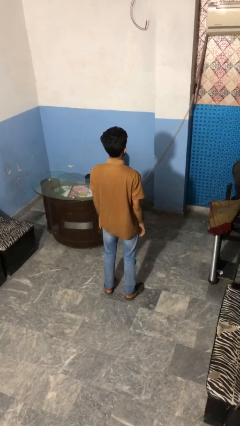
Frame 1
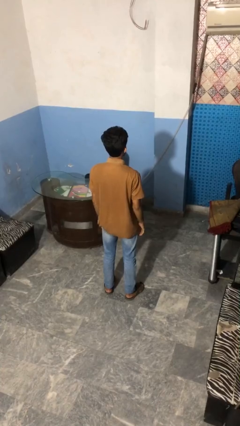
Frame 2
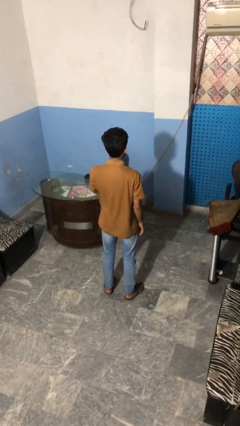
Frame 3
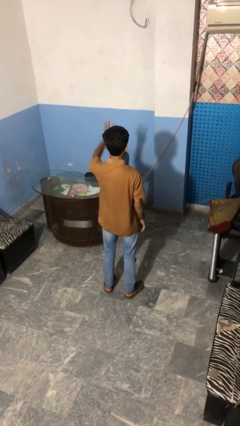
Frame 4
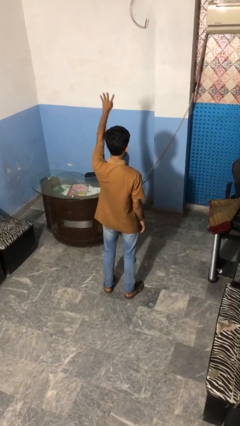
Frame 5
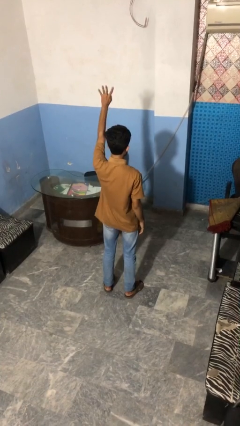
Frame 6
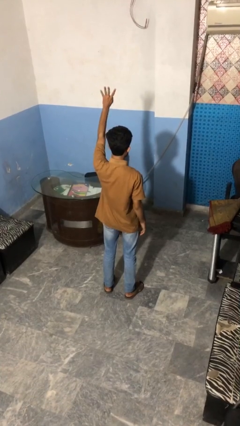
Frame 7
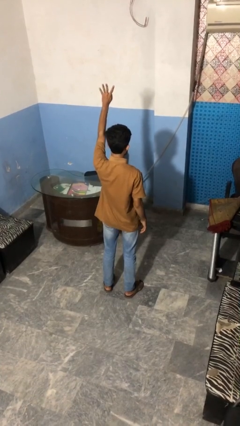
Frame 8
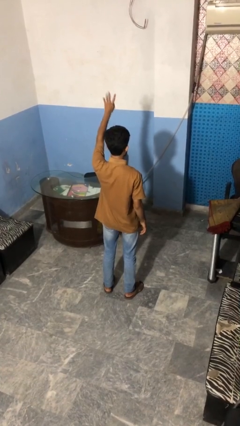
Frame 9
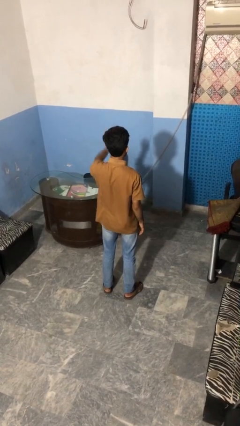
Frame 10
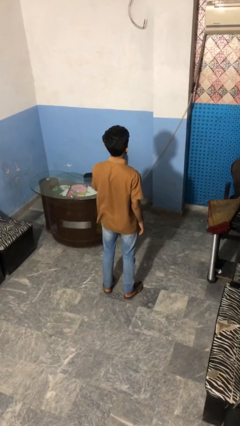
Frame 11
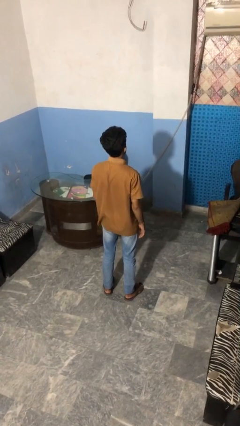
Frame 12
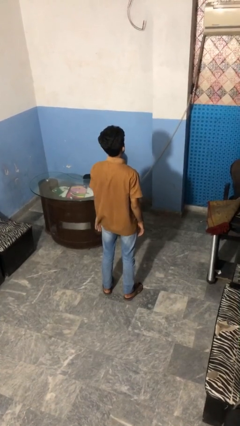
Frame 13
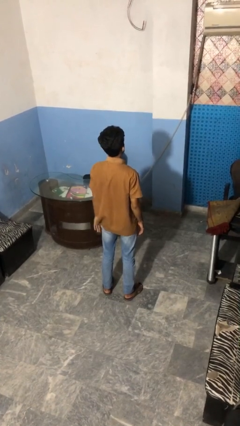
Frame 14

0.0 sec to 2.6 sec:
person gestures number four

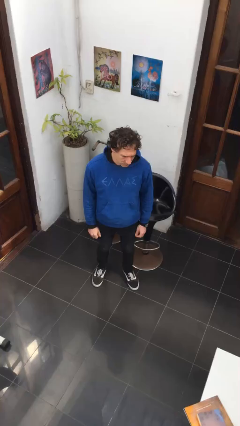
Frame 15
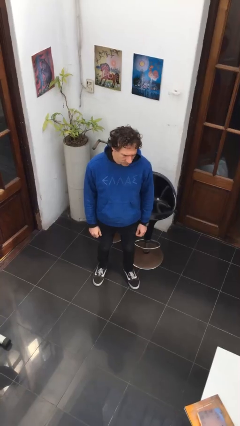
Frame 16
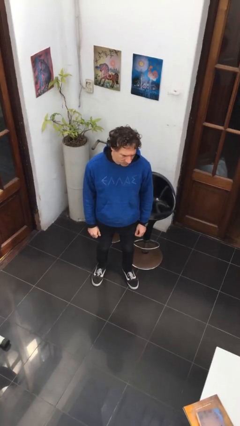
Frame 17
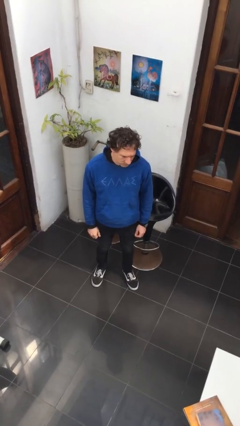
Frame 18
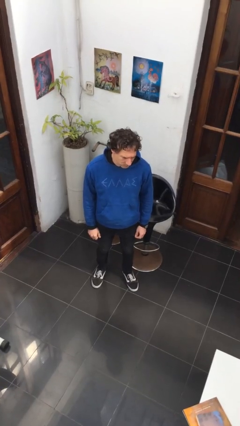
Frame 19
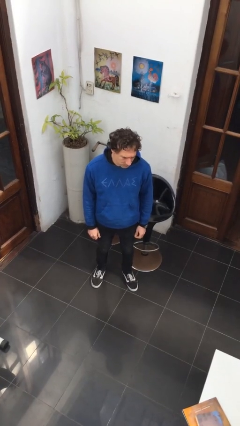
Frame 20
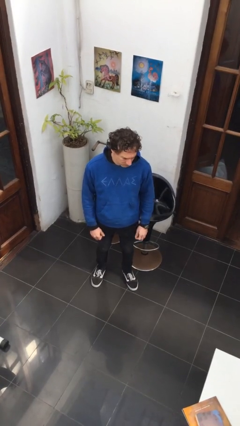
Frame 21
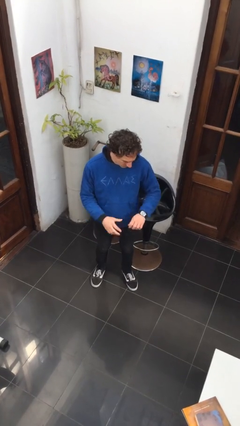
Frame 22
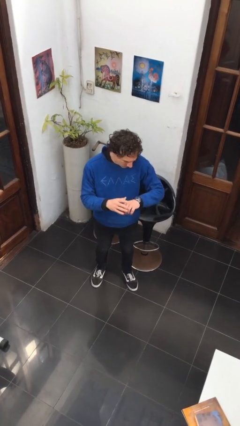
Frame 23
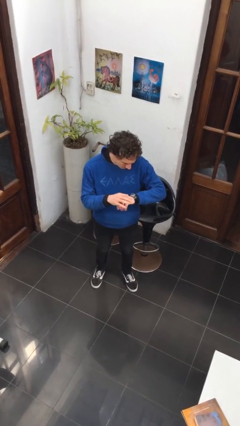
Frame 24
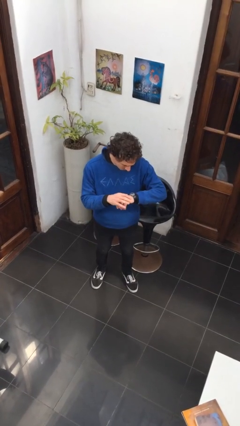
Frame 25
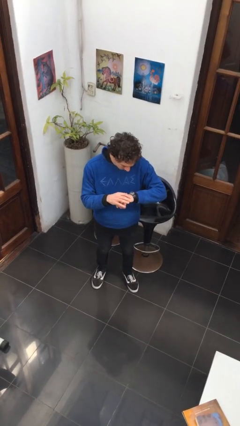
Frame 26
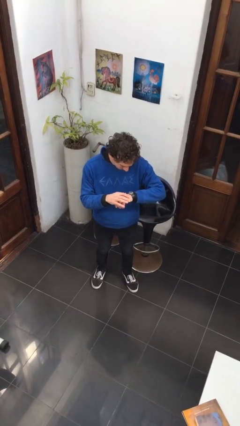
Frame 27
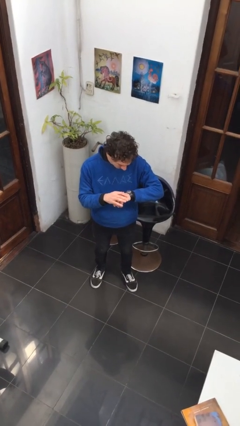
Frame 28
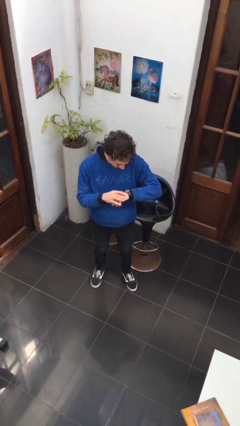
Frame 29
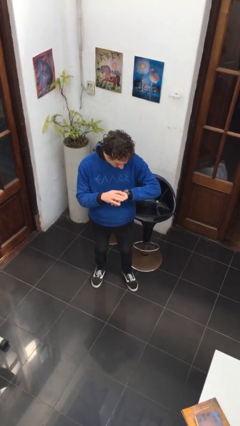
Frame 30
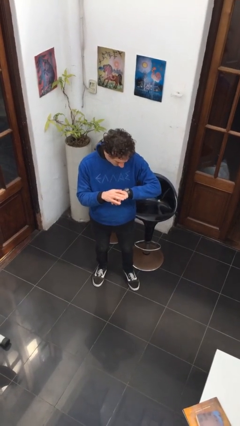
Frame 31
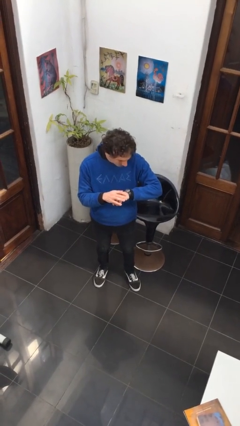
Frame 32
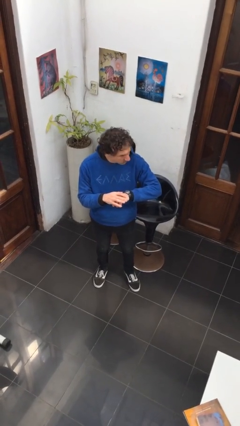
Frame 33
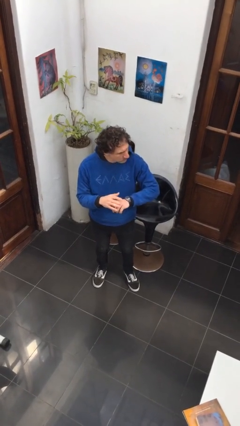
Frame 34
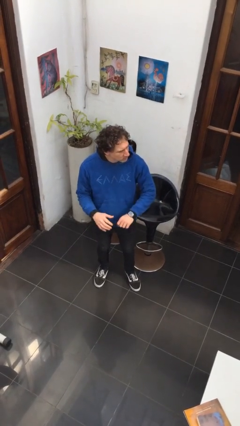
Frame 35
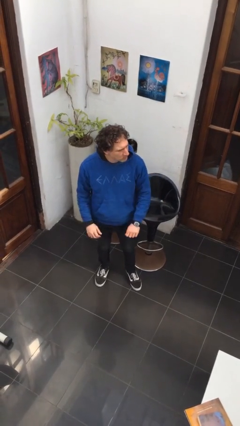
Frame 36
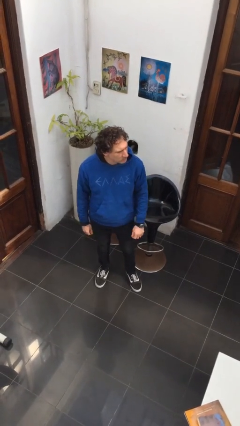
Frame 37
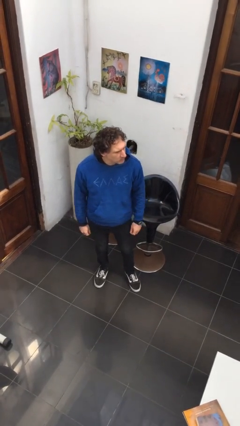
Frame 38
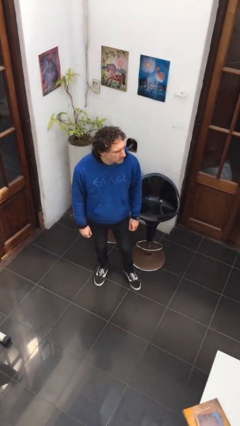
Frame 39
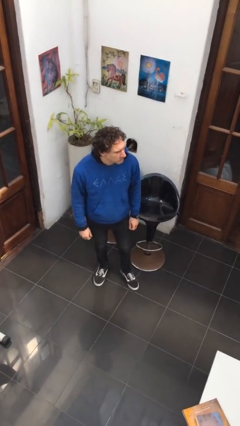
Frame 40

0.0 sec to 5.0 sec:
person looks at wristwatch

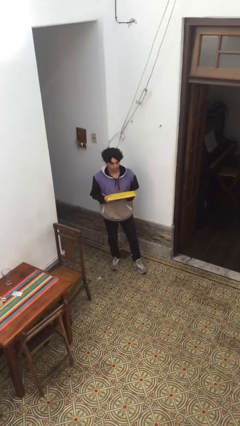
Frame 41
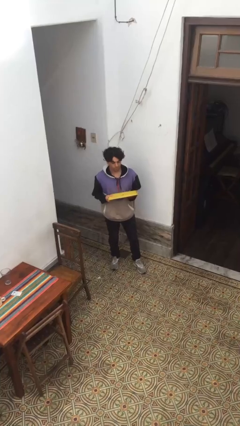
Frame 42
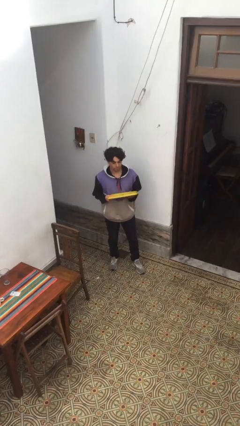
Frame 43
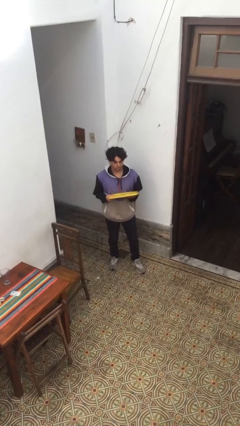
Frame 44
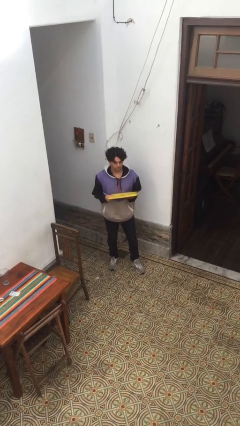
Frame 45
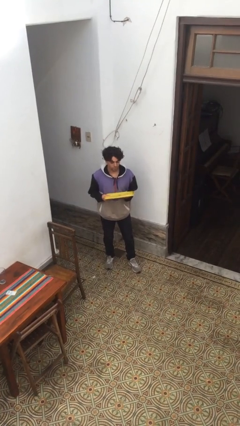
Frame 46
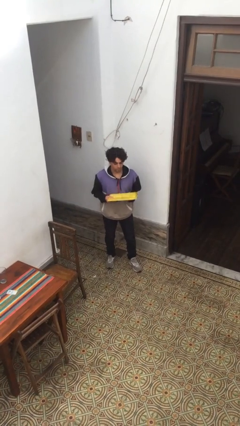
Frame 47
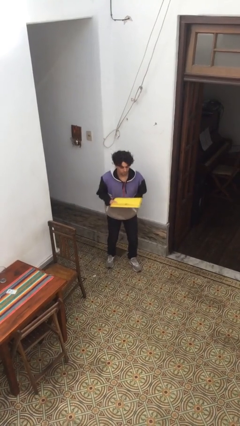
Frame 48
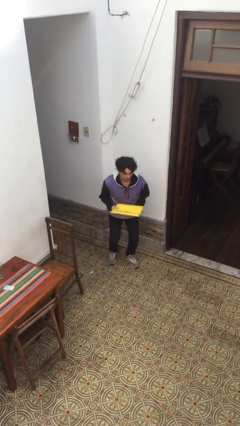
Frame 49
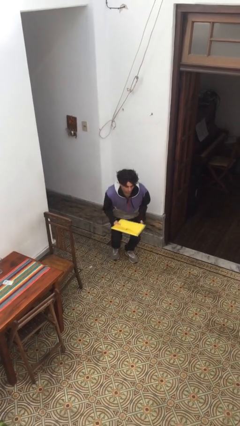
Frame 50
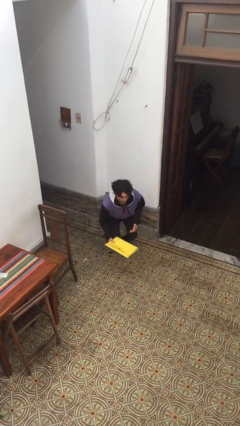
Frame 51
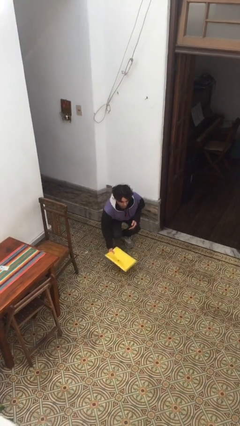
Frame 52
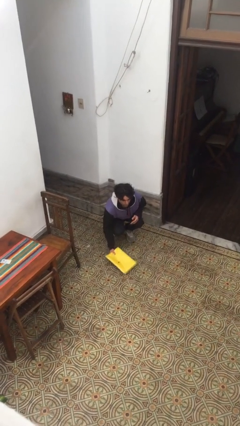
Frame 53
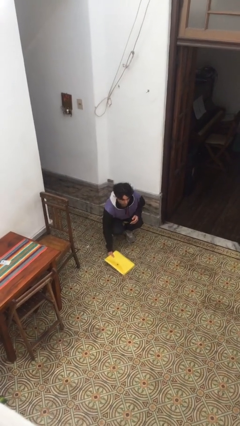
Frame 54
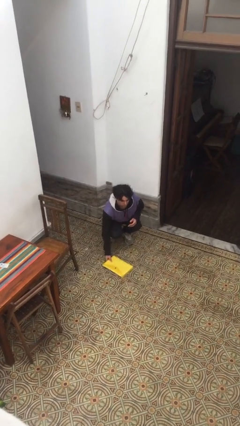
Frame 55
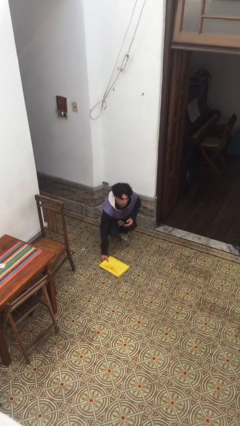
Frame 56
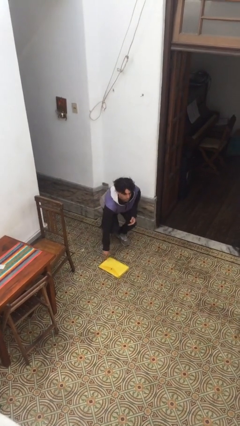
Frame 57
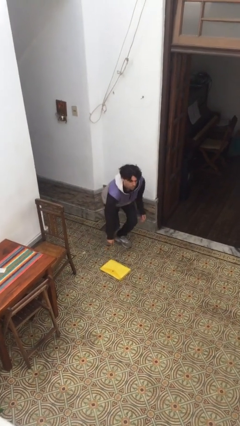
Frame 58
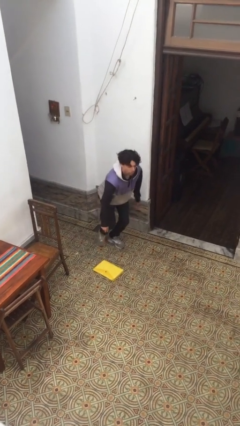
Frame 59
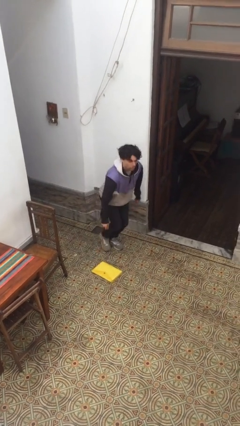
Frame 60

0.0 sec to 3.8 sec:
person puts down object on floor

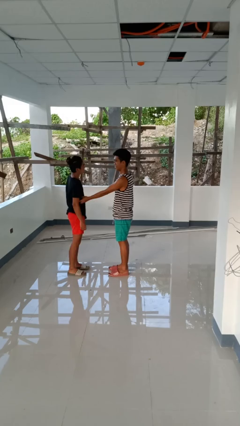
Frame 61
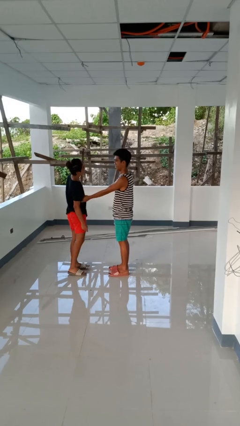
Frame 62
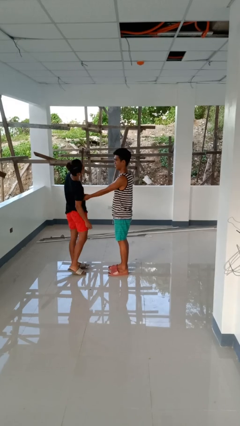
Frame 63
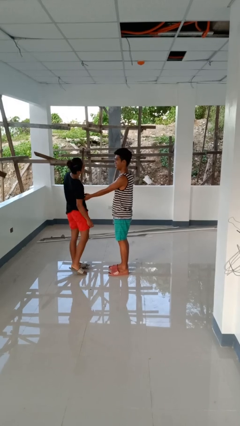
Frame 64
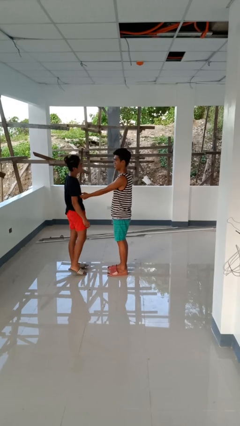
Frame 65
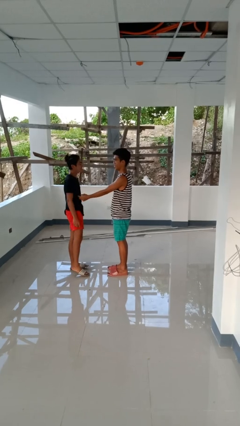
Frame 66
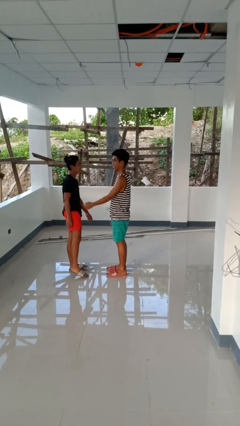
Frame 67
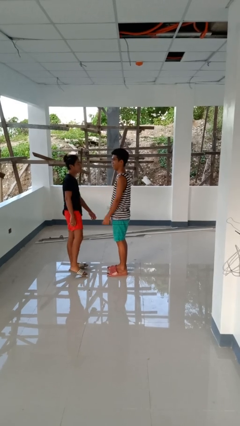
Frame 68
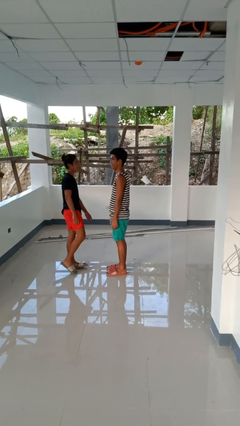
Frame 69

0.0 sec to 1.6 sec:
person tickles person

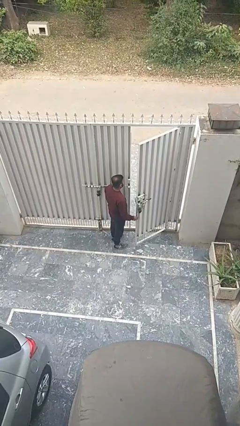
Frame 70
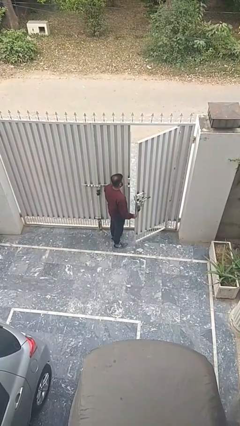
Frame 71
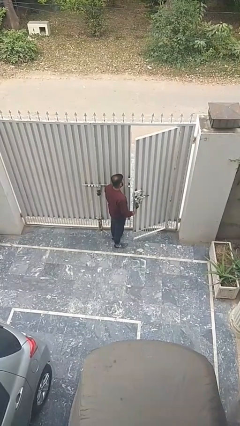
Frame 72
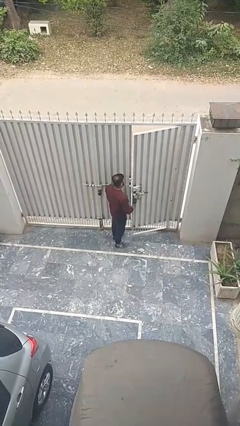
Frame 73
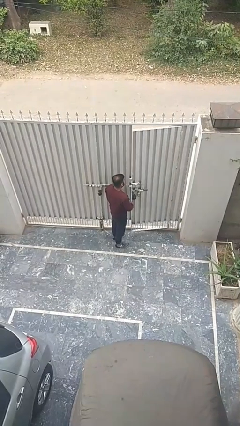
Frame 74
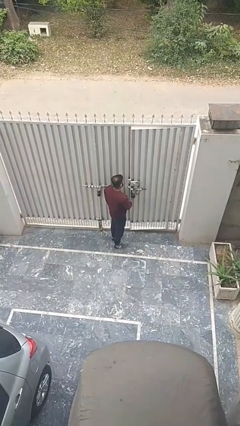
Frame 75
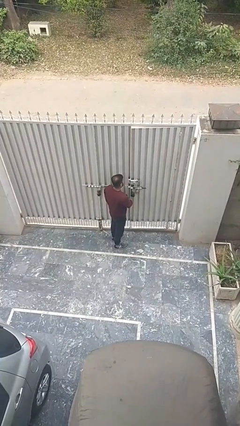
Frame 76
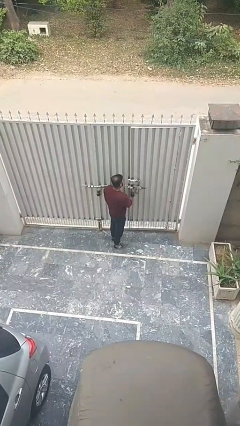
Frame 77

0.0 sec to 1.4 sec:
person closes facility door

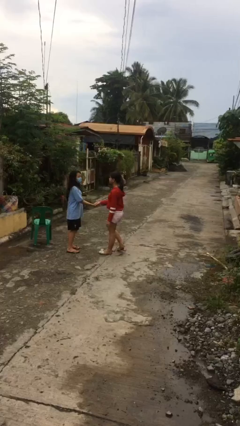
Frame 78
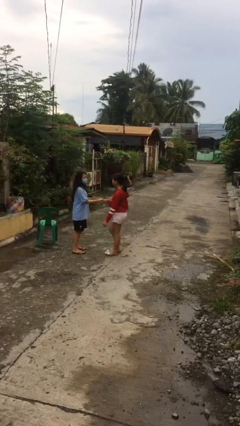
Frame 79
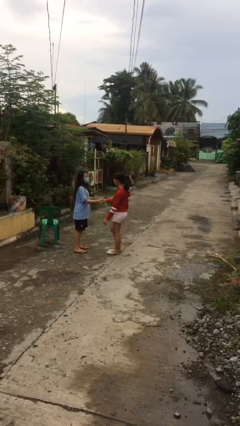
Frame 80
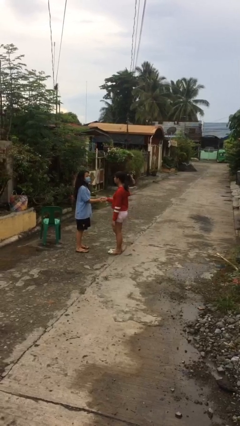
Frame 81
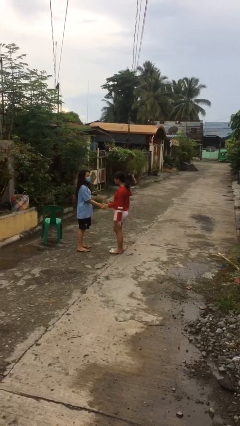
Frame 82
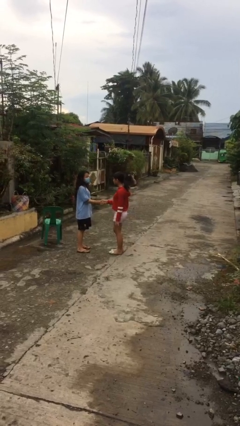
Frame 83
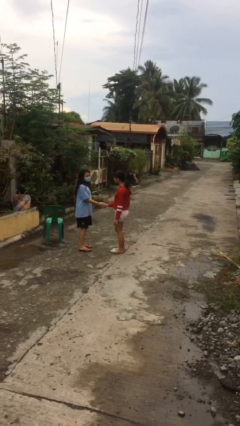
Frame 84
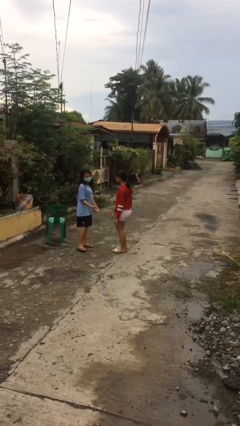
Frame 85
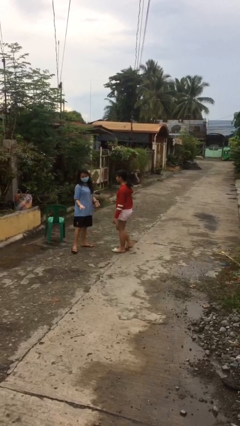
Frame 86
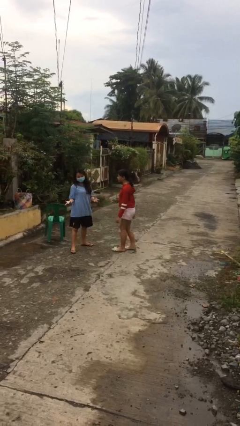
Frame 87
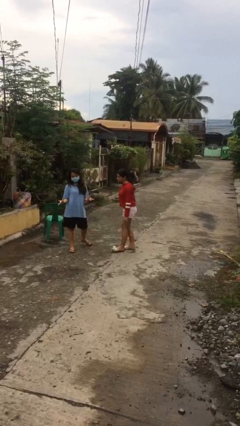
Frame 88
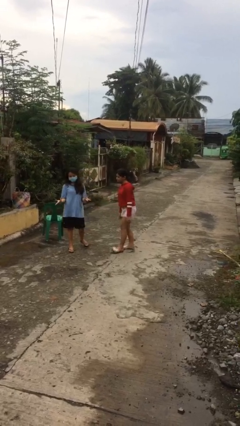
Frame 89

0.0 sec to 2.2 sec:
person shakes hand

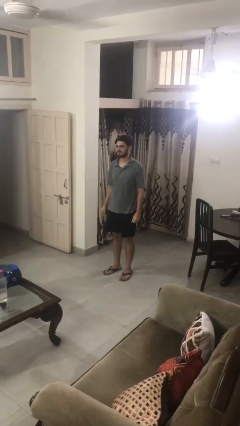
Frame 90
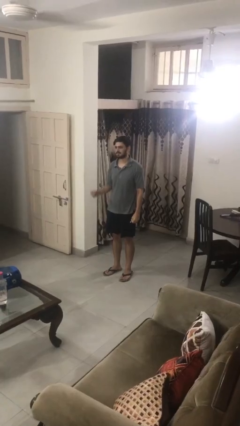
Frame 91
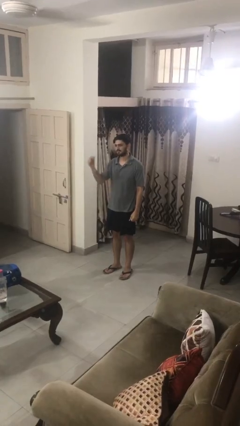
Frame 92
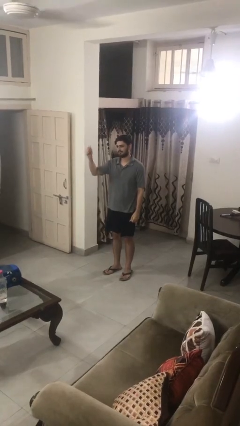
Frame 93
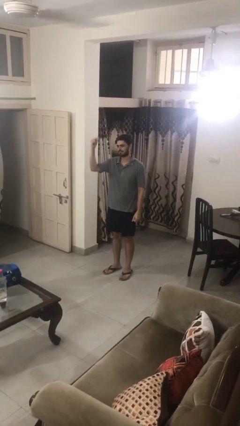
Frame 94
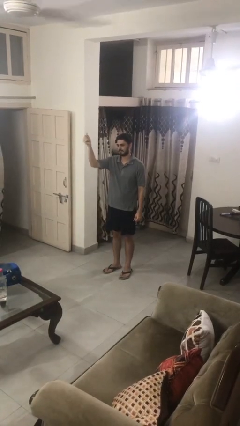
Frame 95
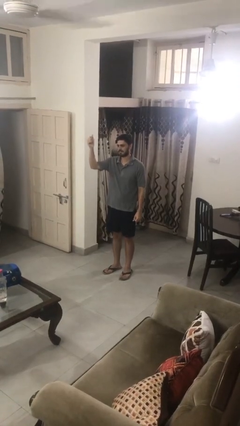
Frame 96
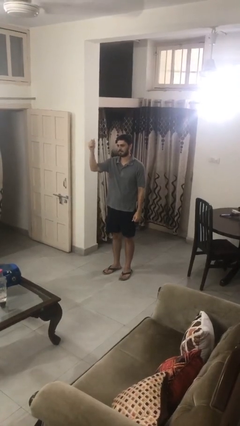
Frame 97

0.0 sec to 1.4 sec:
person snaps fingers
